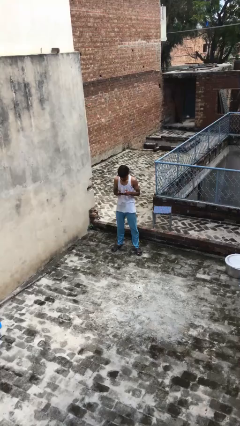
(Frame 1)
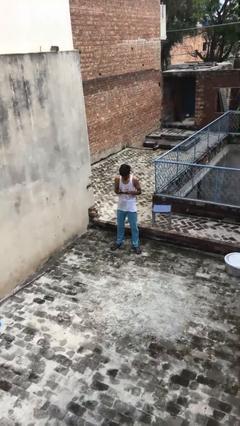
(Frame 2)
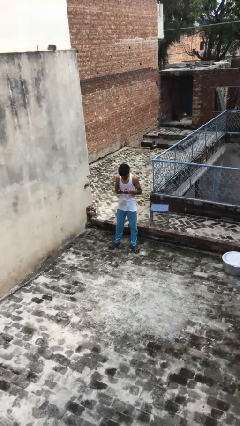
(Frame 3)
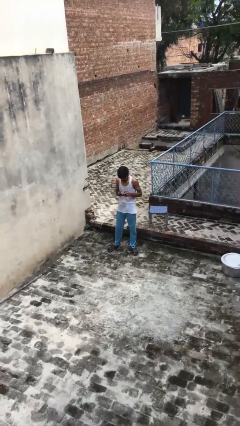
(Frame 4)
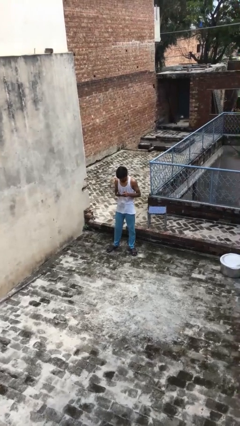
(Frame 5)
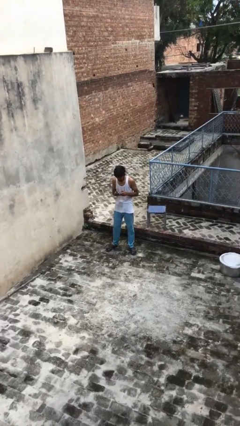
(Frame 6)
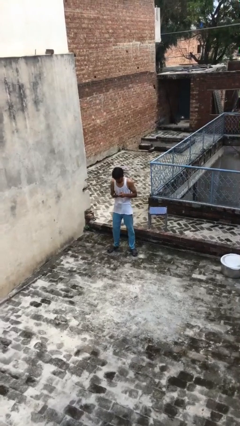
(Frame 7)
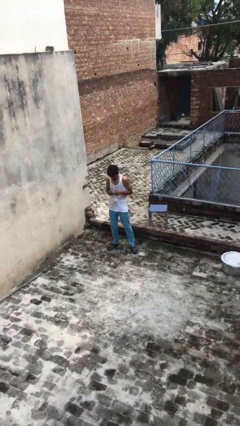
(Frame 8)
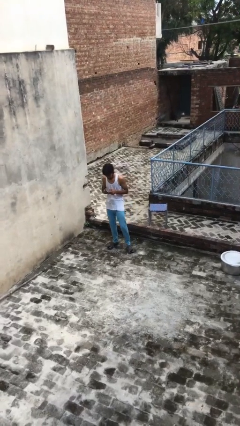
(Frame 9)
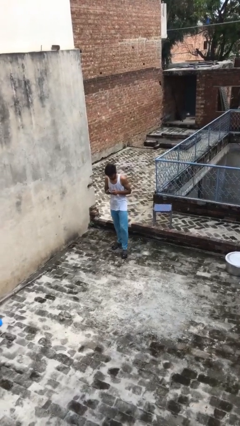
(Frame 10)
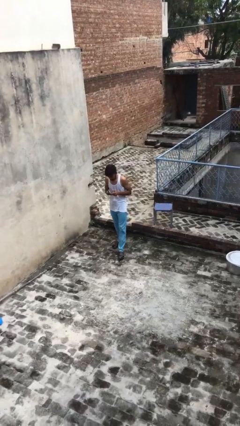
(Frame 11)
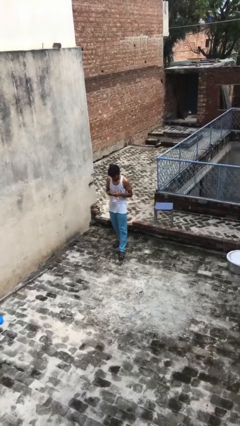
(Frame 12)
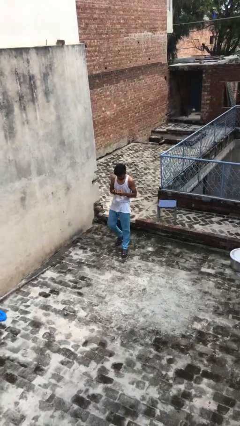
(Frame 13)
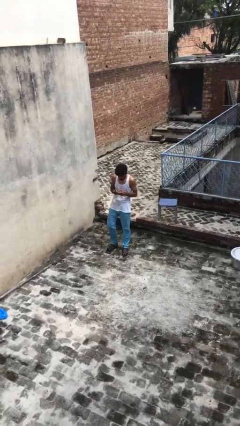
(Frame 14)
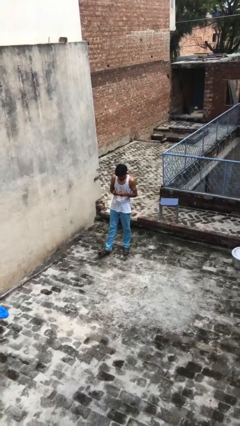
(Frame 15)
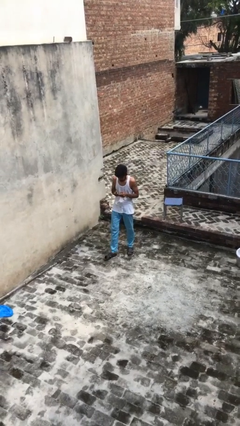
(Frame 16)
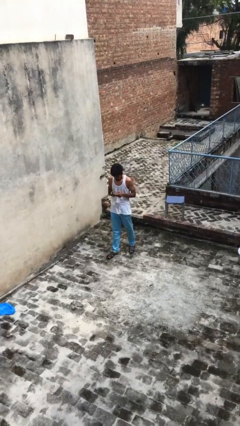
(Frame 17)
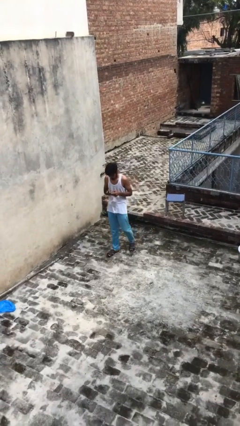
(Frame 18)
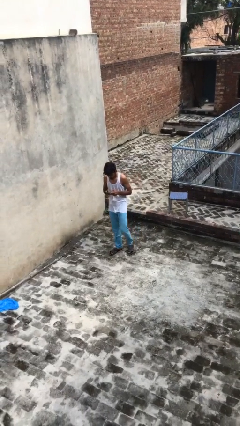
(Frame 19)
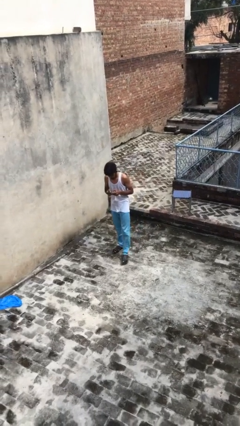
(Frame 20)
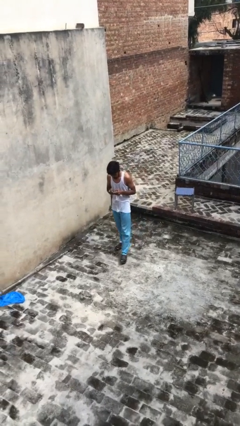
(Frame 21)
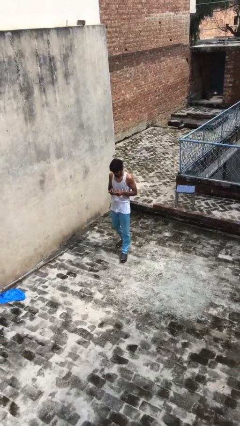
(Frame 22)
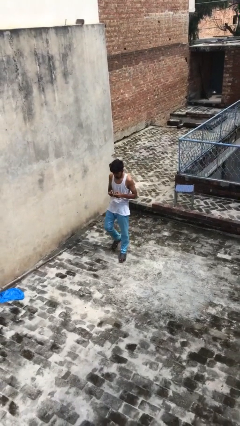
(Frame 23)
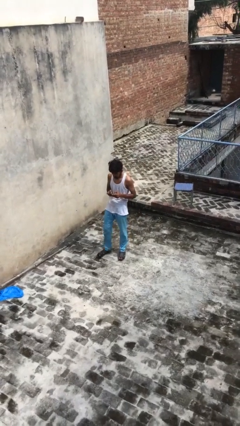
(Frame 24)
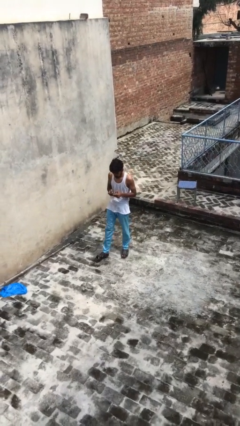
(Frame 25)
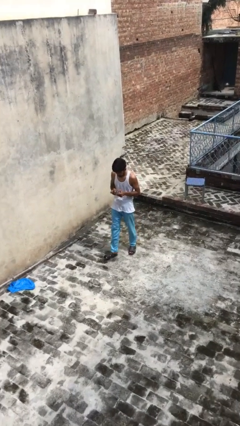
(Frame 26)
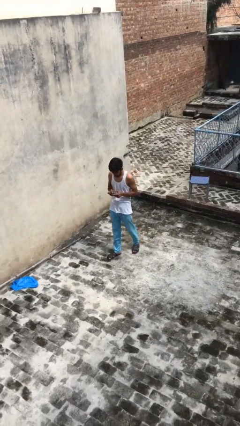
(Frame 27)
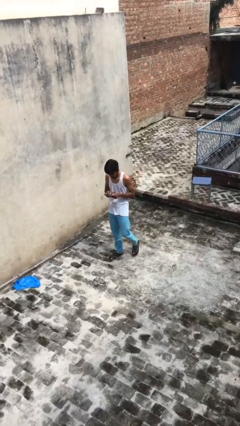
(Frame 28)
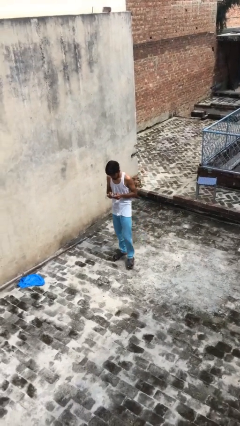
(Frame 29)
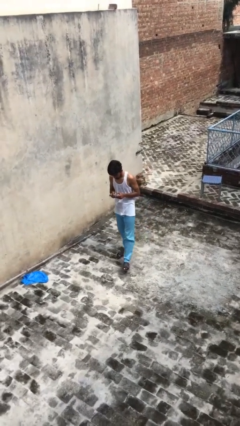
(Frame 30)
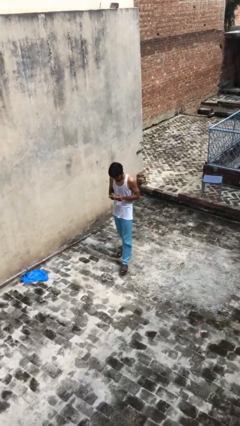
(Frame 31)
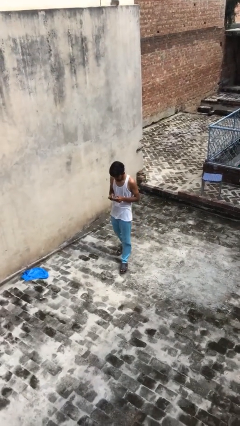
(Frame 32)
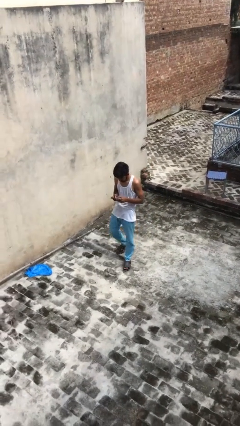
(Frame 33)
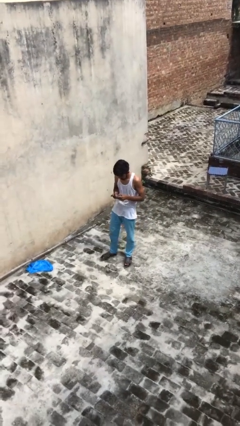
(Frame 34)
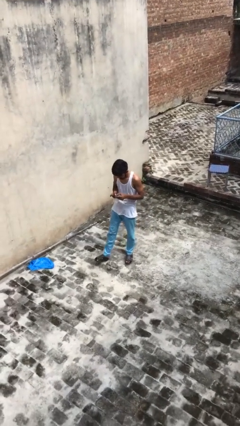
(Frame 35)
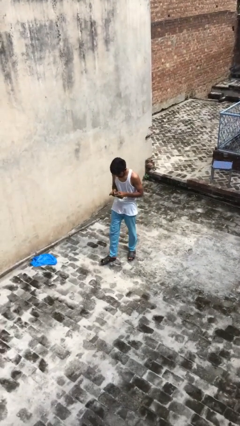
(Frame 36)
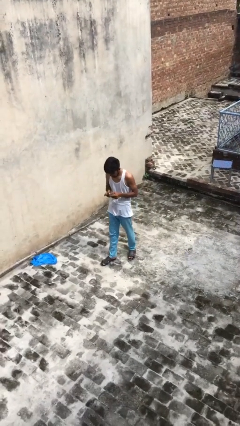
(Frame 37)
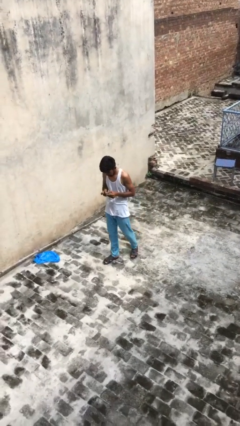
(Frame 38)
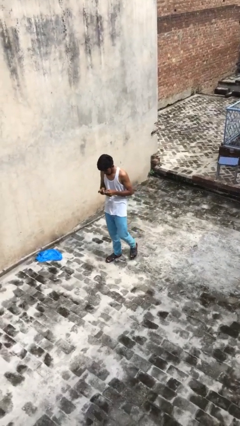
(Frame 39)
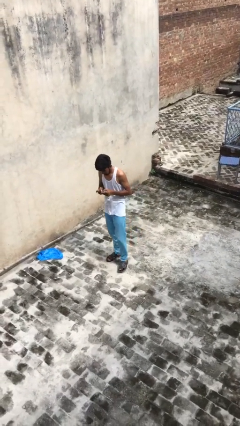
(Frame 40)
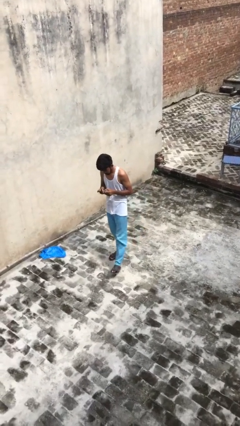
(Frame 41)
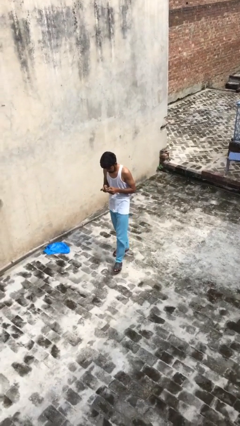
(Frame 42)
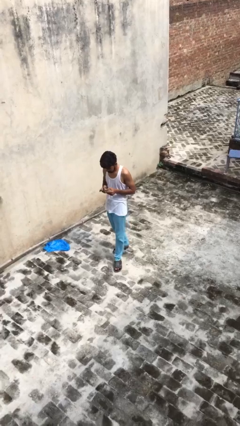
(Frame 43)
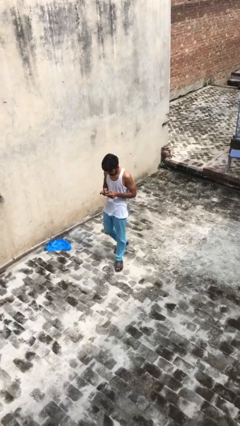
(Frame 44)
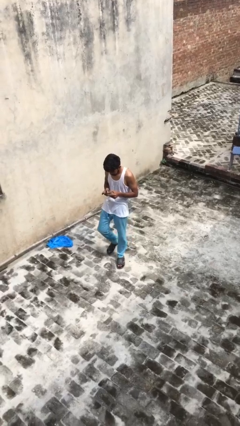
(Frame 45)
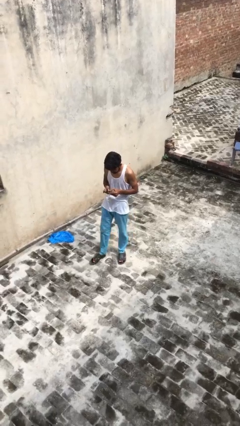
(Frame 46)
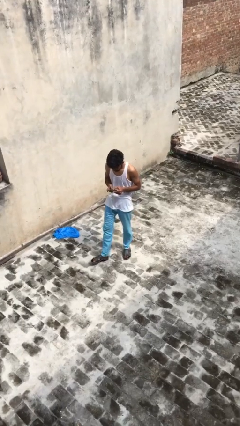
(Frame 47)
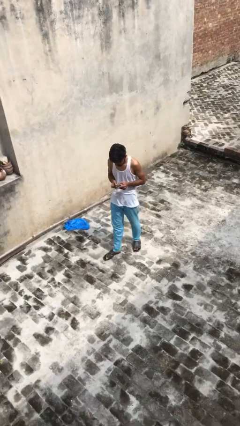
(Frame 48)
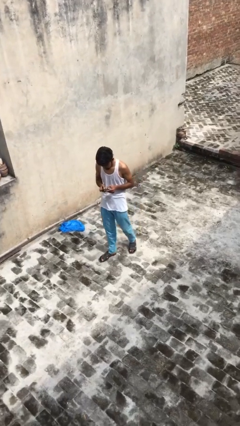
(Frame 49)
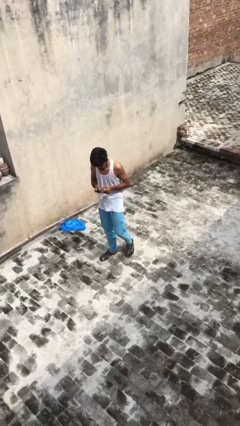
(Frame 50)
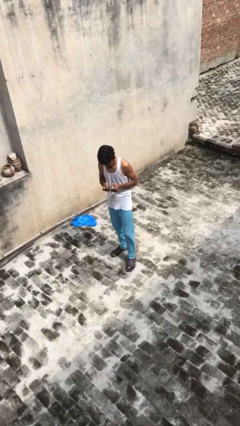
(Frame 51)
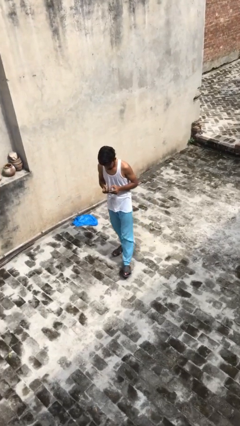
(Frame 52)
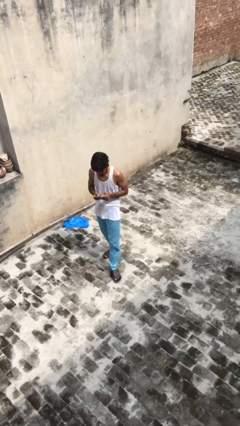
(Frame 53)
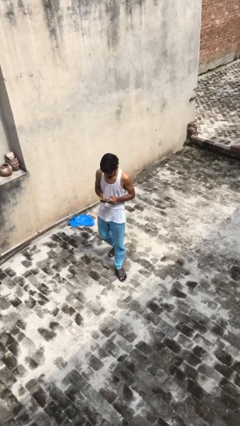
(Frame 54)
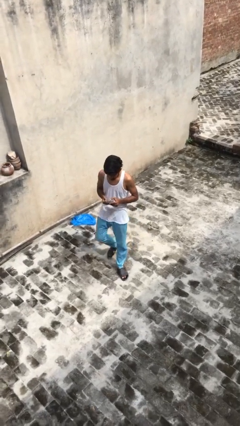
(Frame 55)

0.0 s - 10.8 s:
person texts on phone

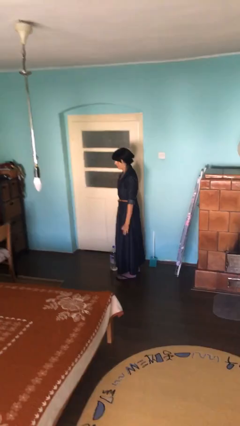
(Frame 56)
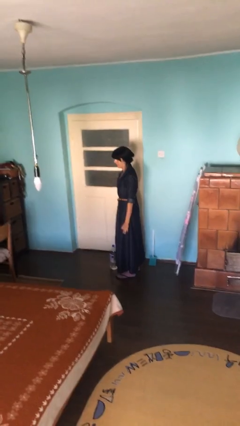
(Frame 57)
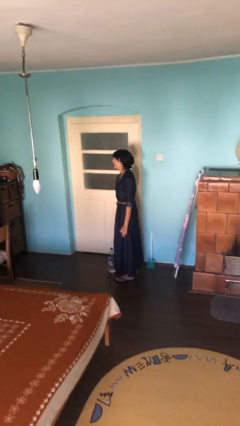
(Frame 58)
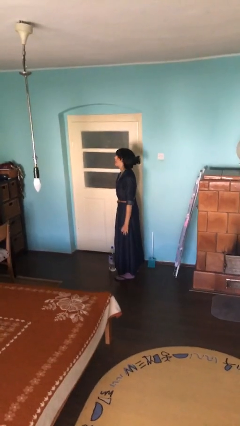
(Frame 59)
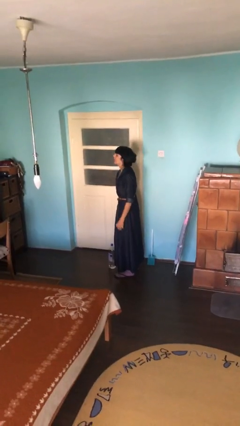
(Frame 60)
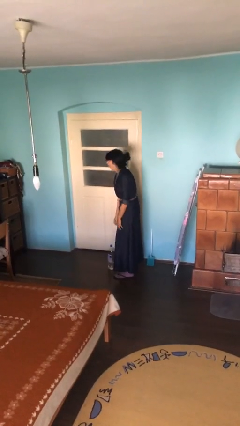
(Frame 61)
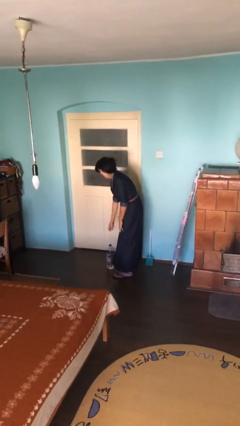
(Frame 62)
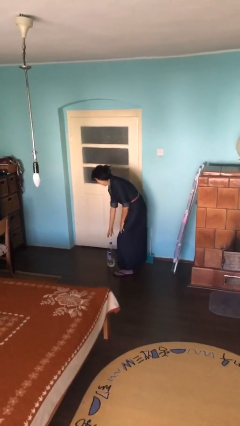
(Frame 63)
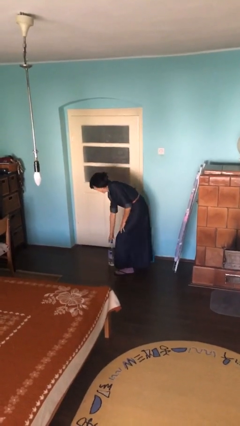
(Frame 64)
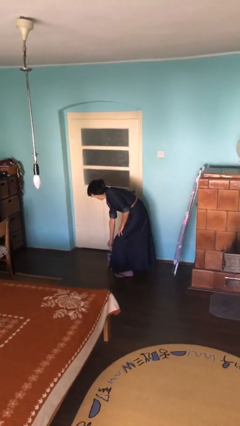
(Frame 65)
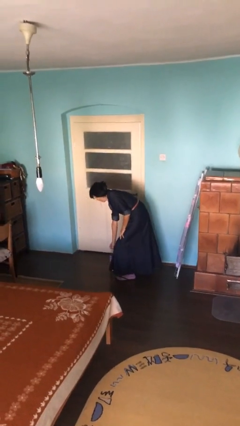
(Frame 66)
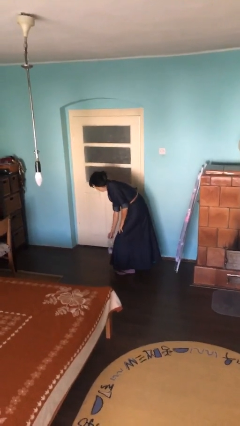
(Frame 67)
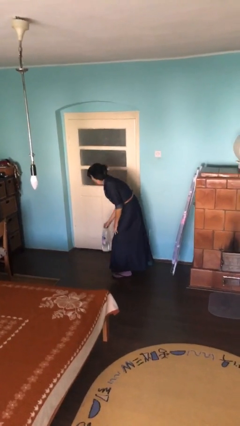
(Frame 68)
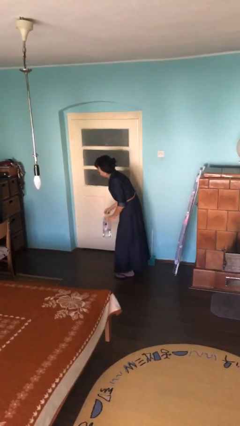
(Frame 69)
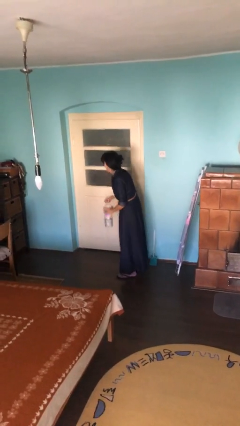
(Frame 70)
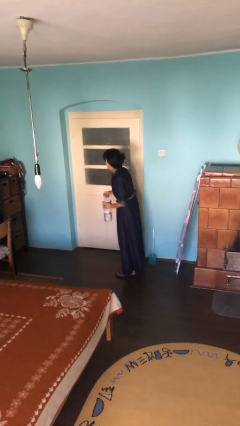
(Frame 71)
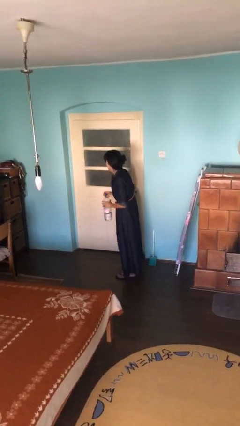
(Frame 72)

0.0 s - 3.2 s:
person picks up object from floor

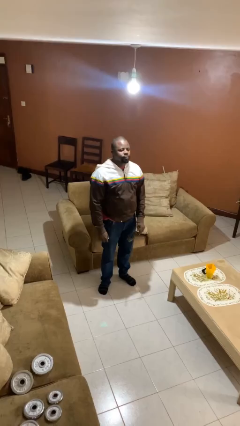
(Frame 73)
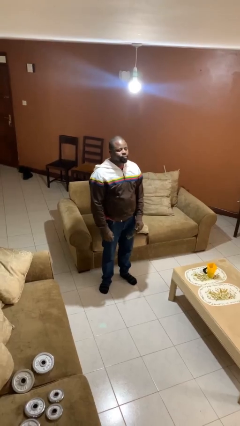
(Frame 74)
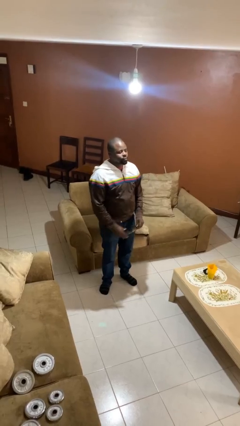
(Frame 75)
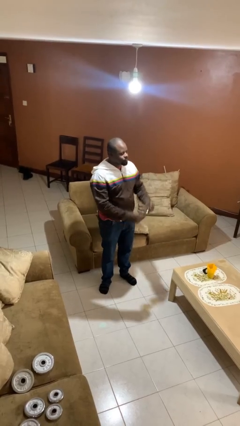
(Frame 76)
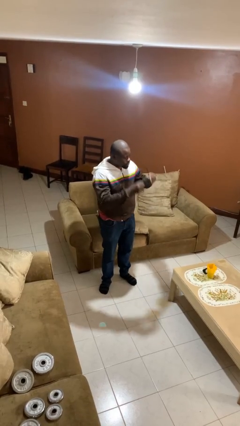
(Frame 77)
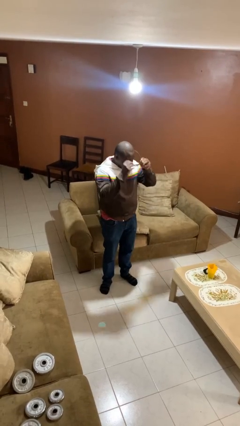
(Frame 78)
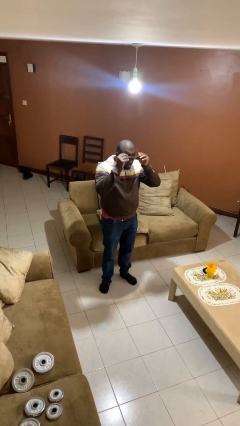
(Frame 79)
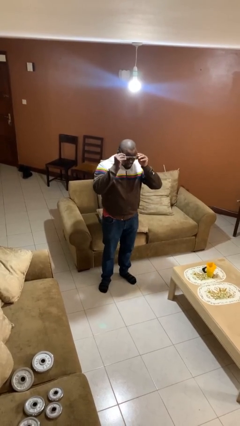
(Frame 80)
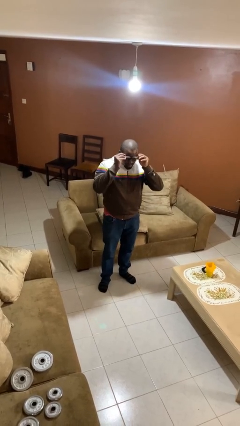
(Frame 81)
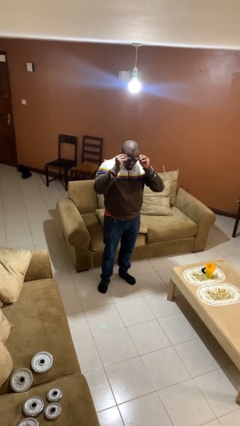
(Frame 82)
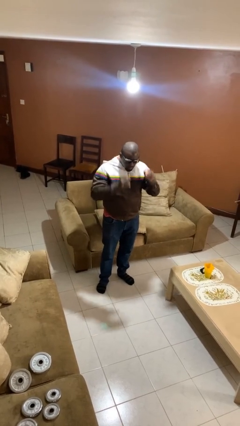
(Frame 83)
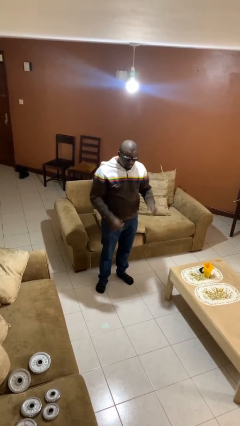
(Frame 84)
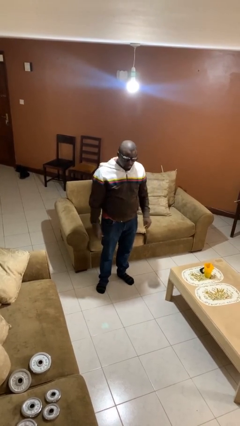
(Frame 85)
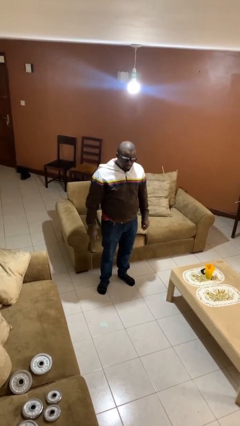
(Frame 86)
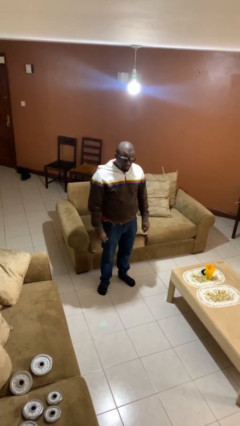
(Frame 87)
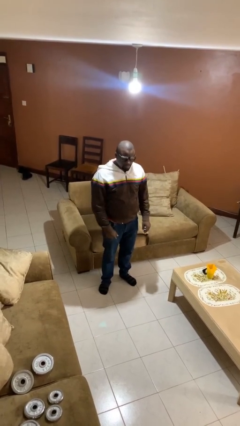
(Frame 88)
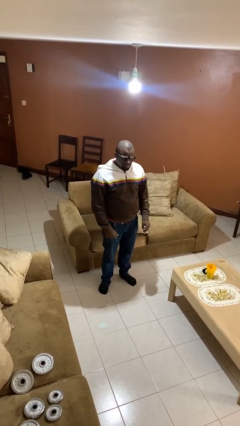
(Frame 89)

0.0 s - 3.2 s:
person puts on sunglasses

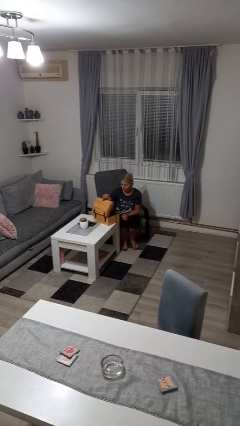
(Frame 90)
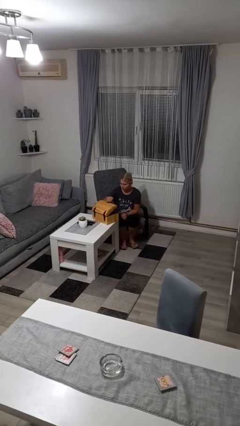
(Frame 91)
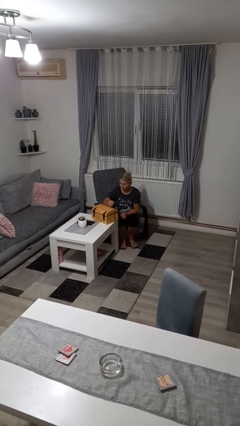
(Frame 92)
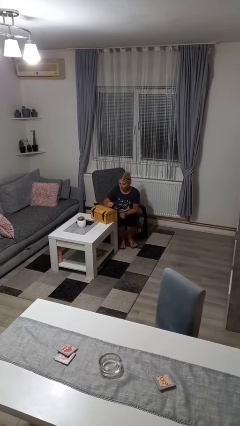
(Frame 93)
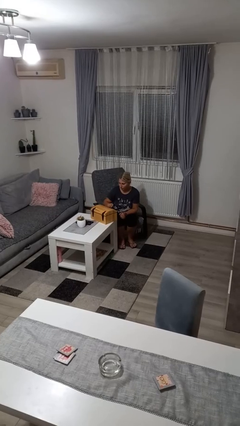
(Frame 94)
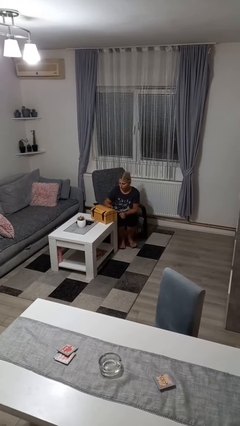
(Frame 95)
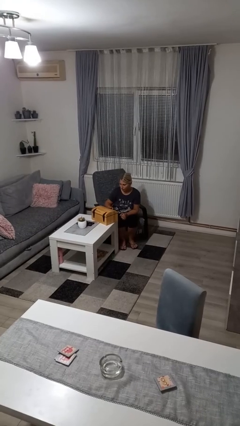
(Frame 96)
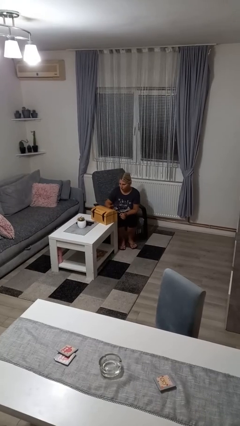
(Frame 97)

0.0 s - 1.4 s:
person closes jewelry box
